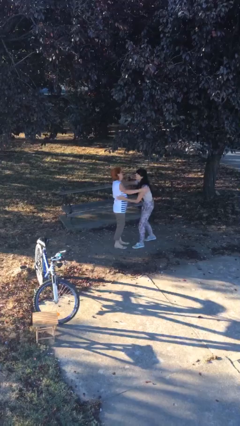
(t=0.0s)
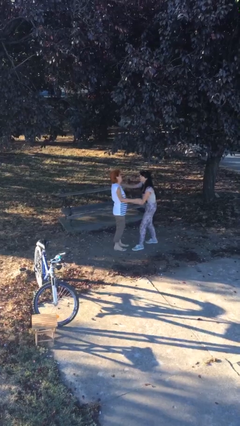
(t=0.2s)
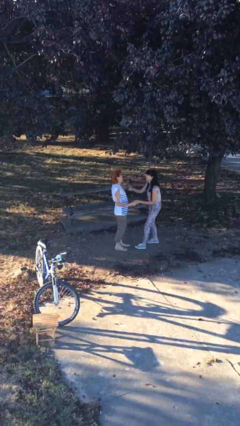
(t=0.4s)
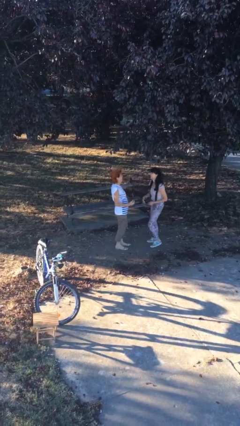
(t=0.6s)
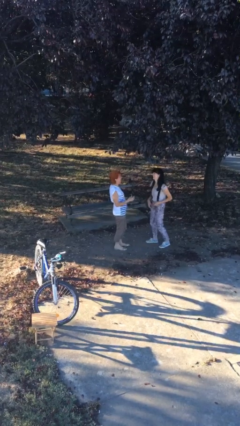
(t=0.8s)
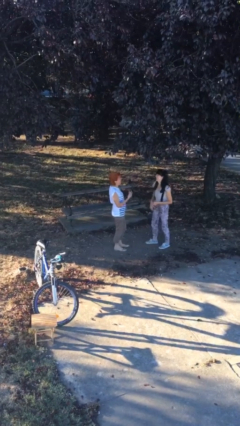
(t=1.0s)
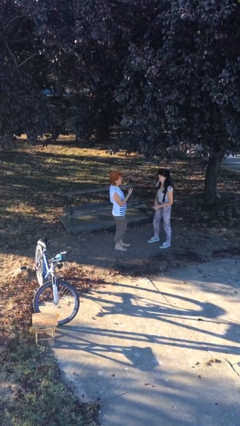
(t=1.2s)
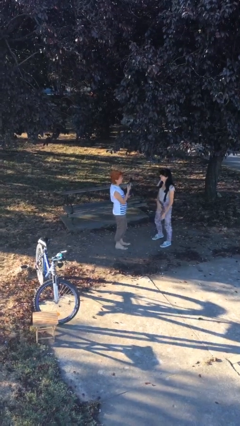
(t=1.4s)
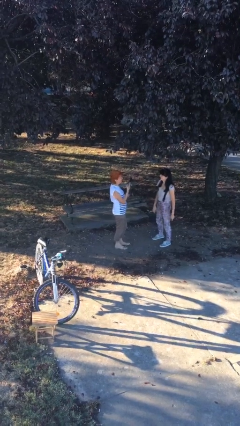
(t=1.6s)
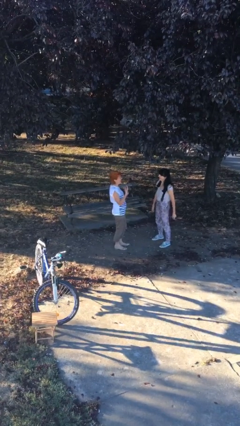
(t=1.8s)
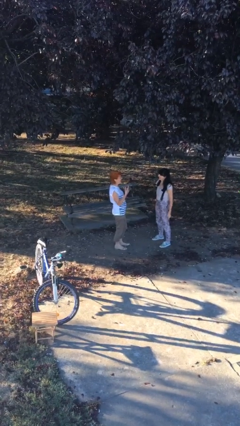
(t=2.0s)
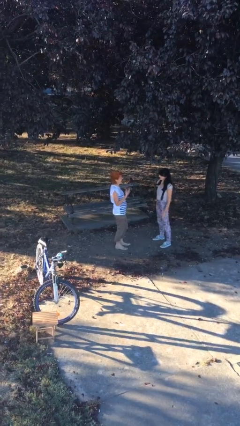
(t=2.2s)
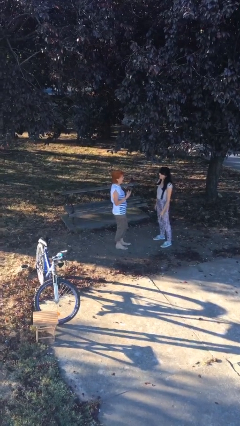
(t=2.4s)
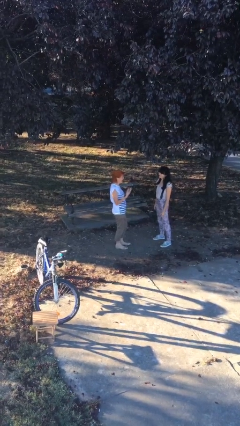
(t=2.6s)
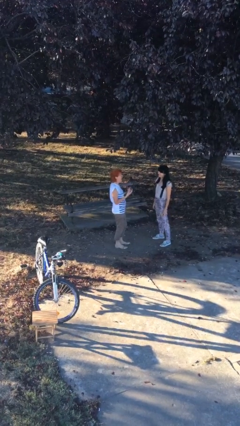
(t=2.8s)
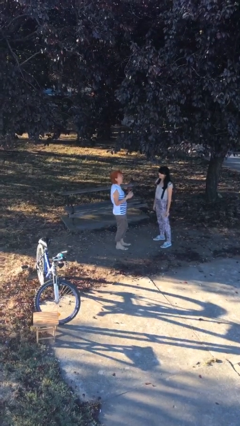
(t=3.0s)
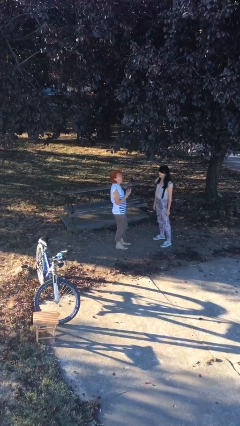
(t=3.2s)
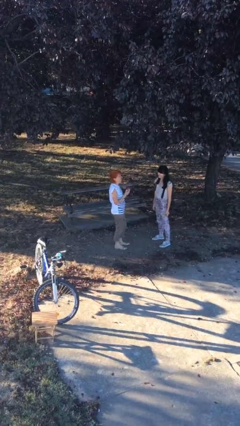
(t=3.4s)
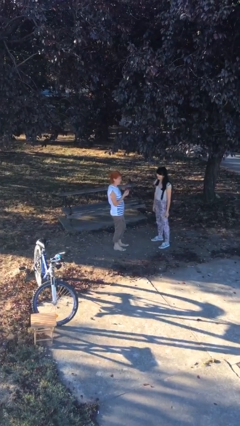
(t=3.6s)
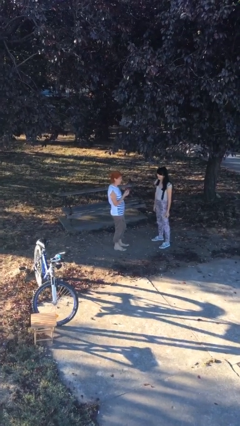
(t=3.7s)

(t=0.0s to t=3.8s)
person talks to person

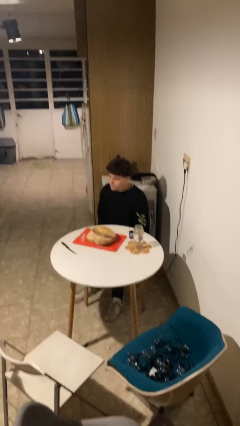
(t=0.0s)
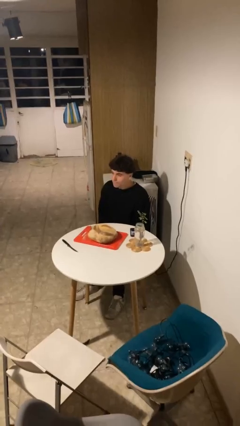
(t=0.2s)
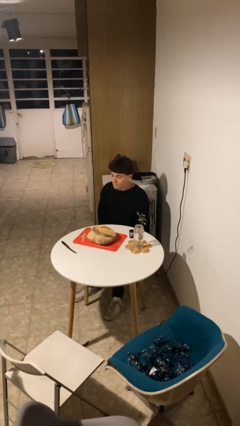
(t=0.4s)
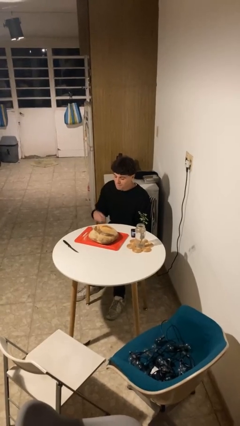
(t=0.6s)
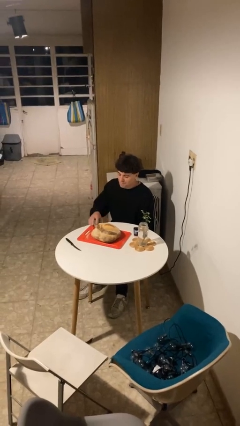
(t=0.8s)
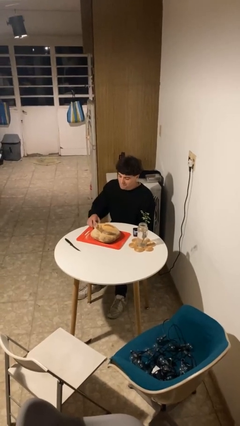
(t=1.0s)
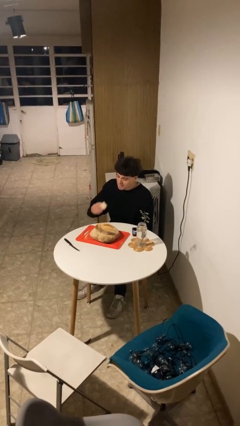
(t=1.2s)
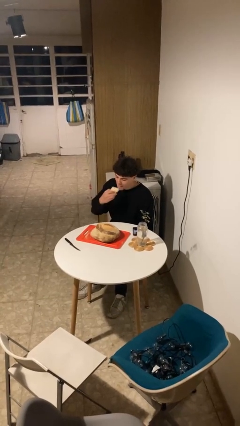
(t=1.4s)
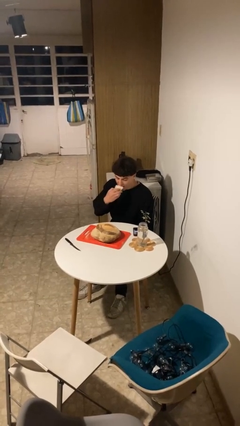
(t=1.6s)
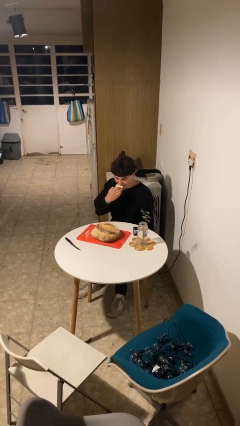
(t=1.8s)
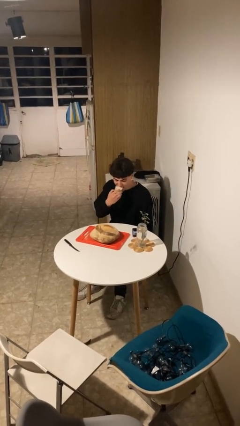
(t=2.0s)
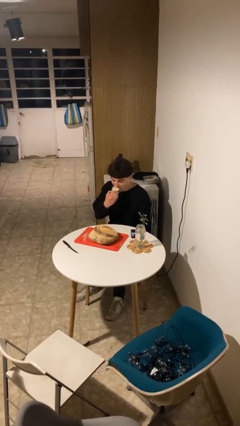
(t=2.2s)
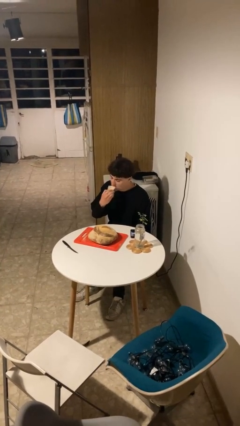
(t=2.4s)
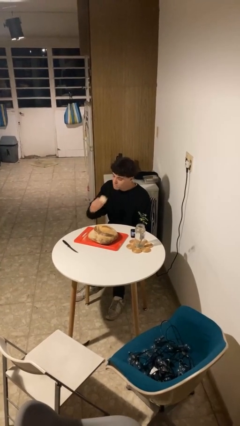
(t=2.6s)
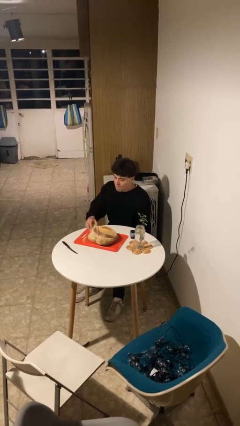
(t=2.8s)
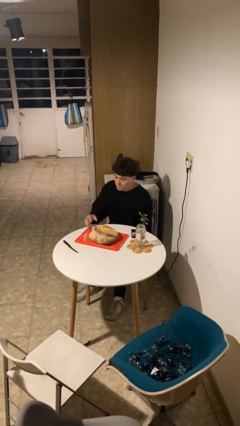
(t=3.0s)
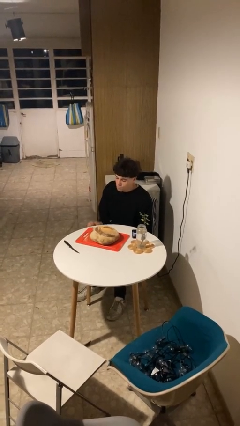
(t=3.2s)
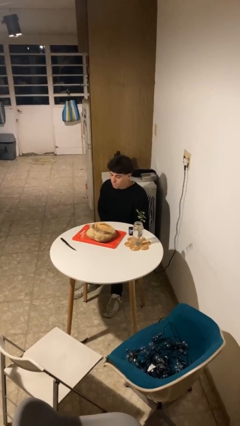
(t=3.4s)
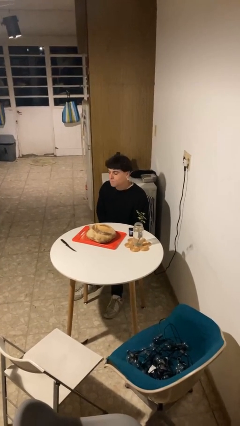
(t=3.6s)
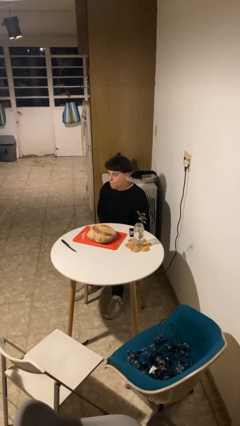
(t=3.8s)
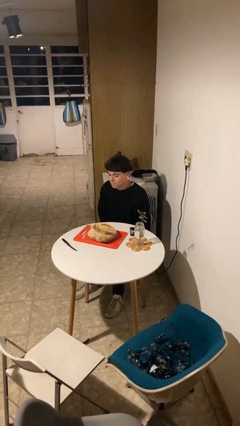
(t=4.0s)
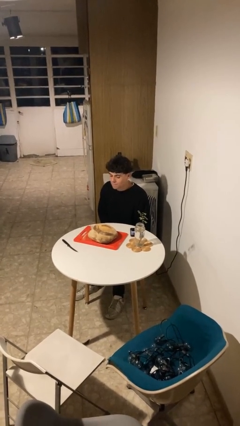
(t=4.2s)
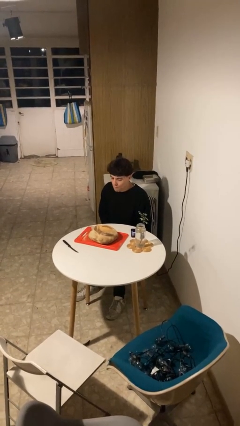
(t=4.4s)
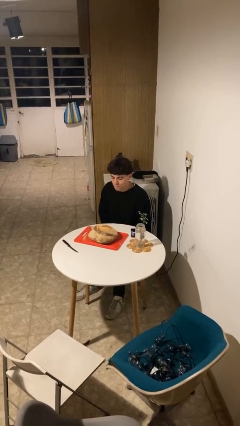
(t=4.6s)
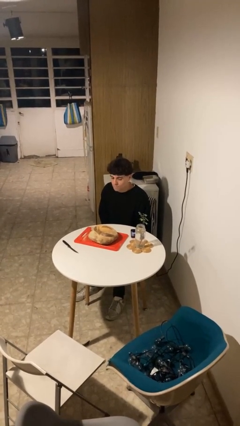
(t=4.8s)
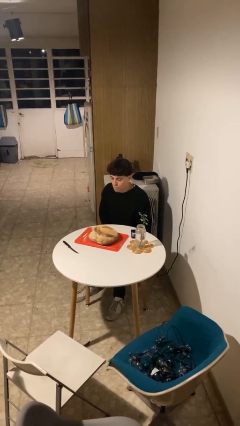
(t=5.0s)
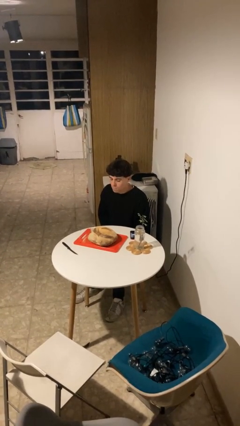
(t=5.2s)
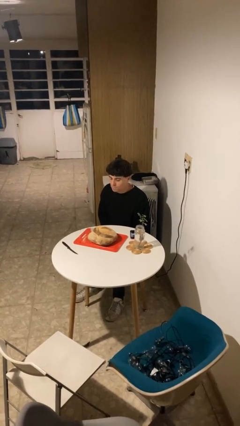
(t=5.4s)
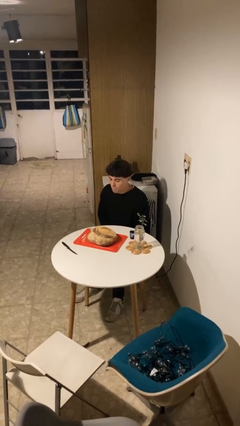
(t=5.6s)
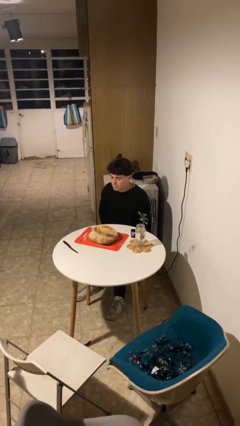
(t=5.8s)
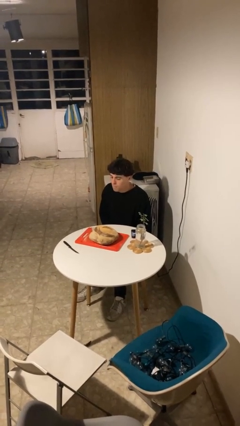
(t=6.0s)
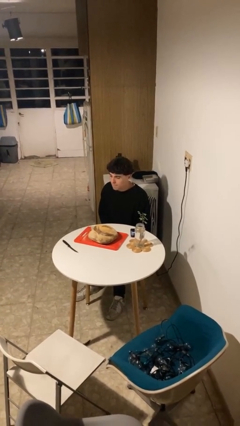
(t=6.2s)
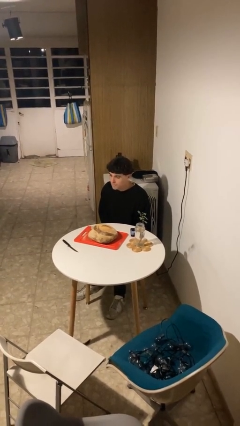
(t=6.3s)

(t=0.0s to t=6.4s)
person eats with hands

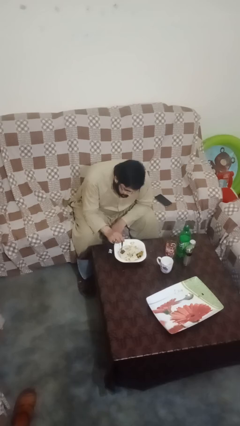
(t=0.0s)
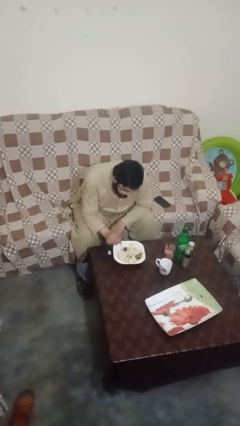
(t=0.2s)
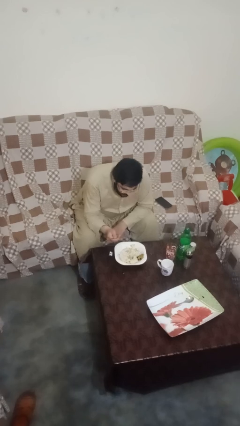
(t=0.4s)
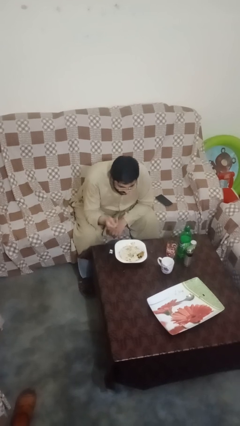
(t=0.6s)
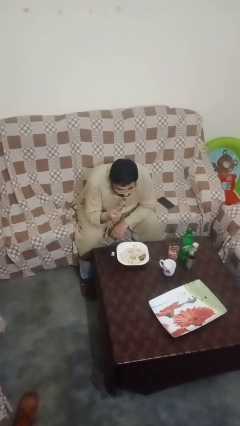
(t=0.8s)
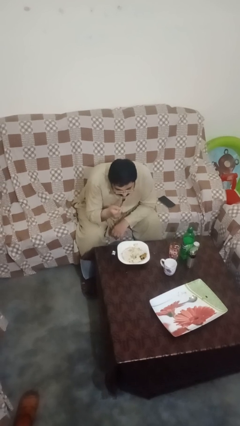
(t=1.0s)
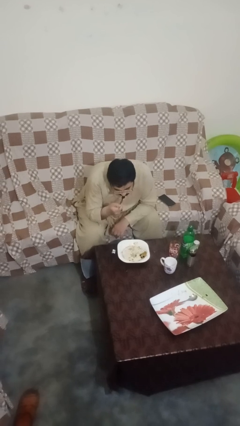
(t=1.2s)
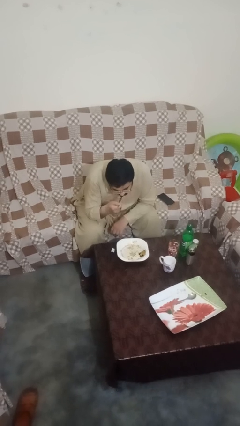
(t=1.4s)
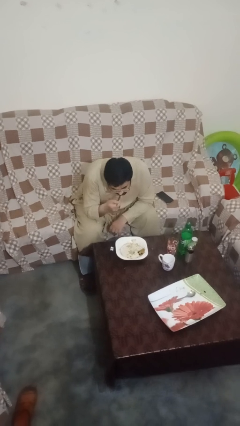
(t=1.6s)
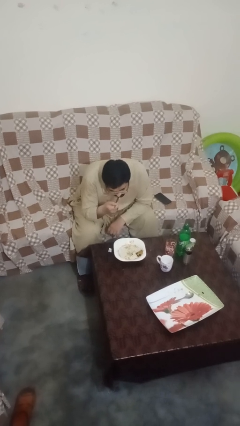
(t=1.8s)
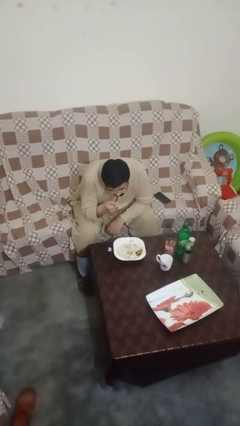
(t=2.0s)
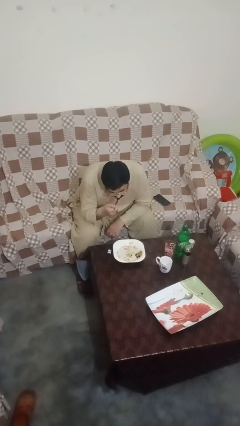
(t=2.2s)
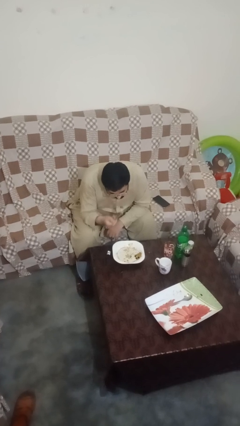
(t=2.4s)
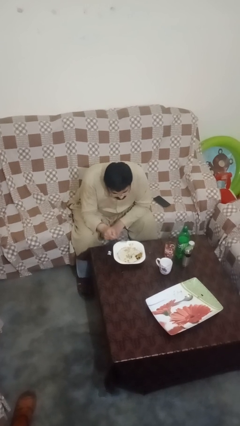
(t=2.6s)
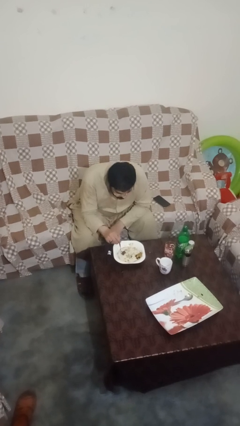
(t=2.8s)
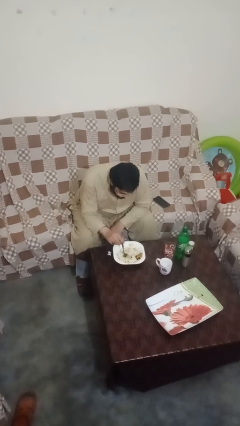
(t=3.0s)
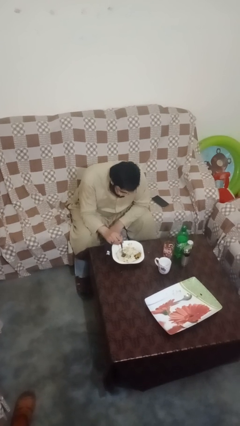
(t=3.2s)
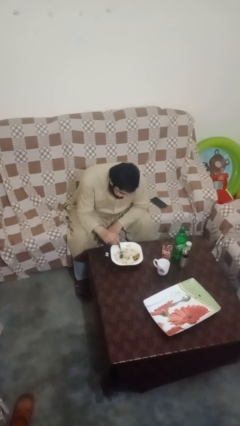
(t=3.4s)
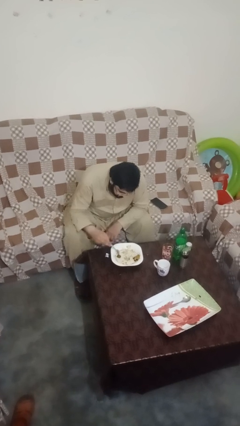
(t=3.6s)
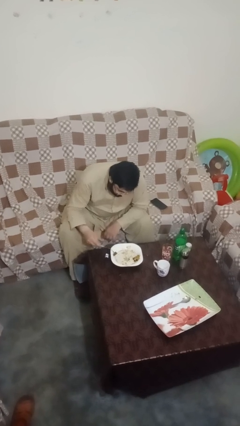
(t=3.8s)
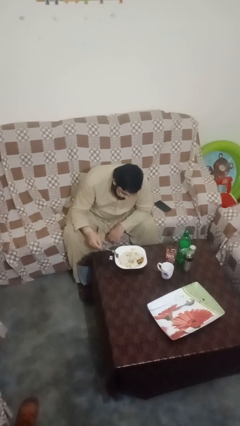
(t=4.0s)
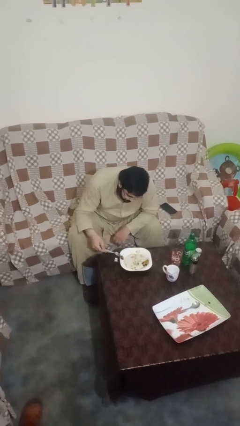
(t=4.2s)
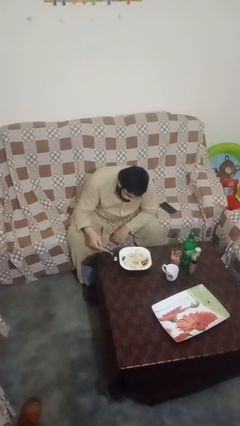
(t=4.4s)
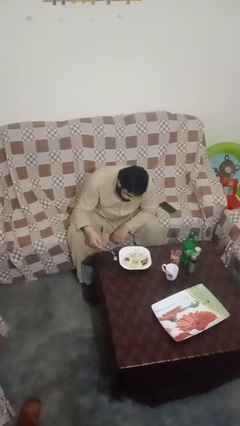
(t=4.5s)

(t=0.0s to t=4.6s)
person eats with utensil

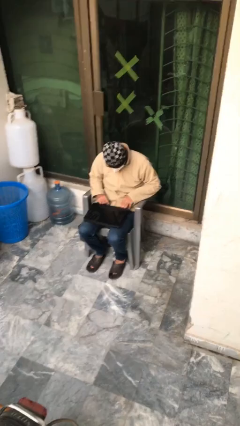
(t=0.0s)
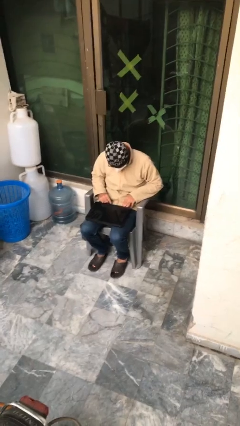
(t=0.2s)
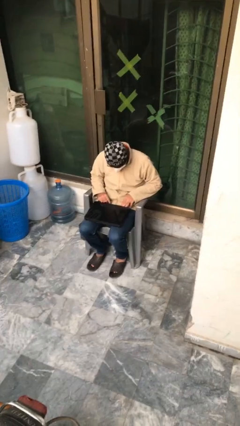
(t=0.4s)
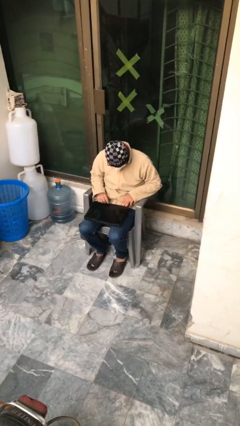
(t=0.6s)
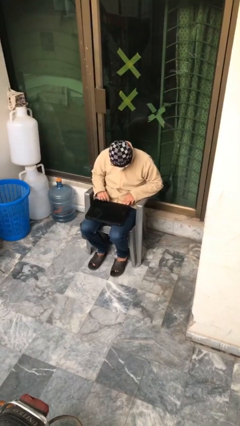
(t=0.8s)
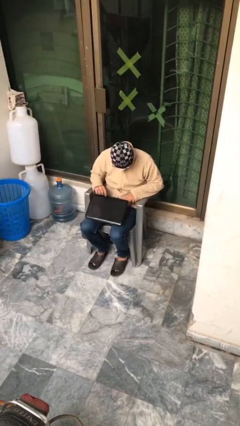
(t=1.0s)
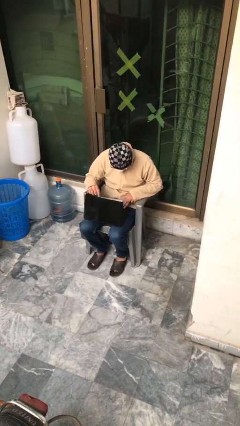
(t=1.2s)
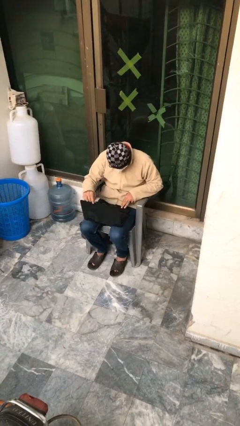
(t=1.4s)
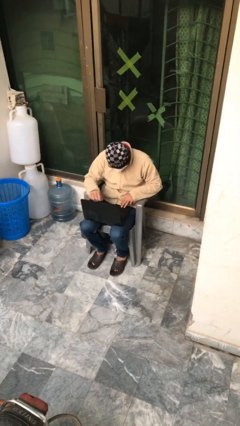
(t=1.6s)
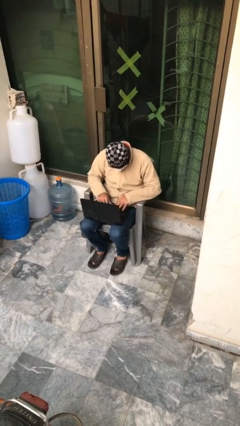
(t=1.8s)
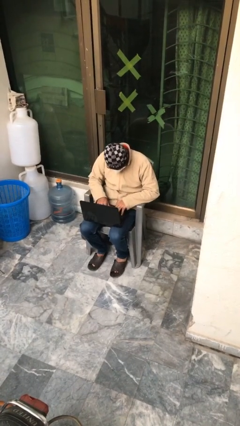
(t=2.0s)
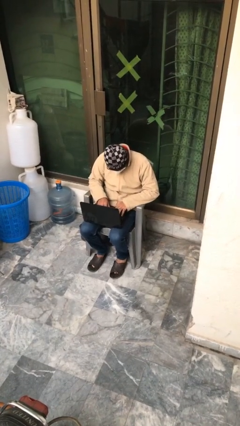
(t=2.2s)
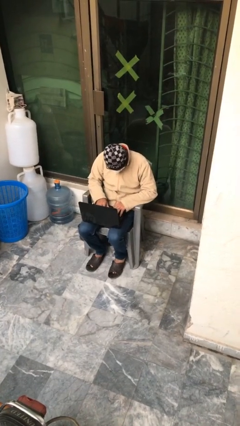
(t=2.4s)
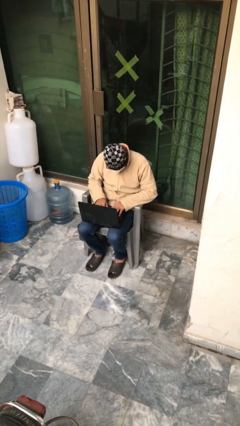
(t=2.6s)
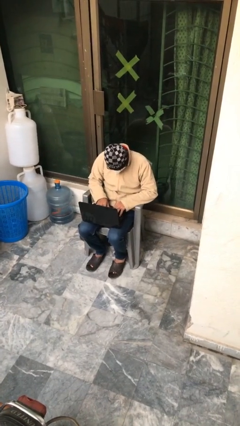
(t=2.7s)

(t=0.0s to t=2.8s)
person interacts with laptop
